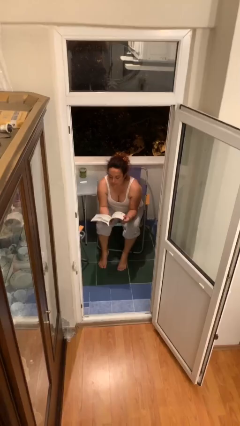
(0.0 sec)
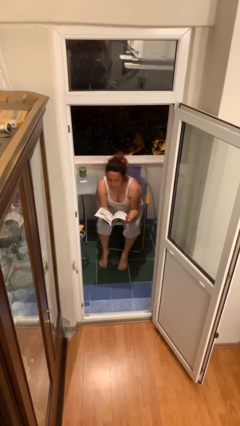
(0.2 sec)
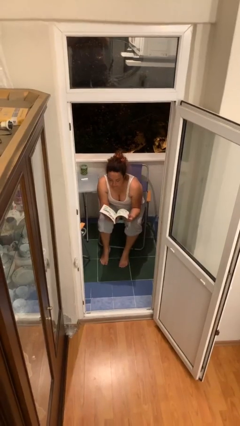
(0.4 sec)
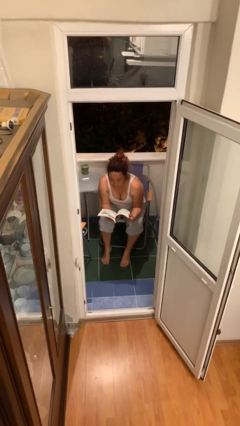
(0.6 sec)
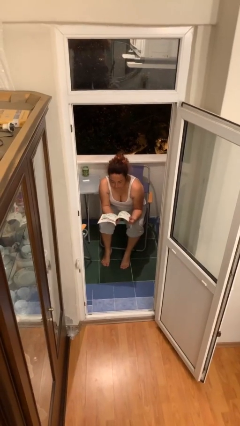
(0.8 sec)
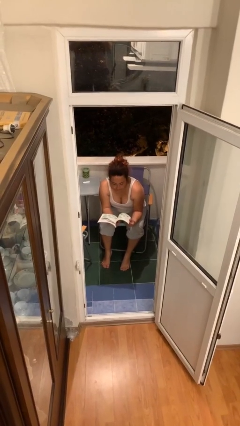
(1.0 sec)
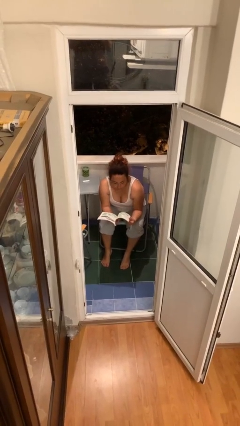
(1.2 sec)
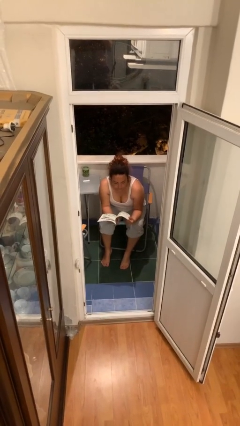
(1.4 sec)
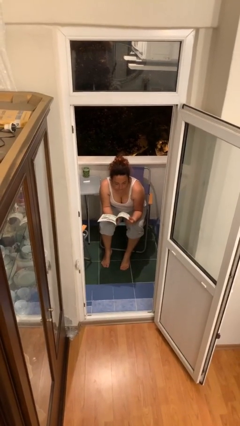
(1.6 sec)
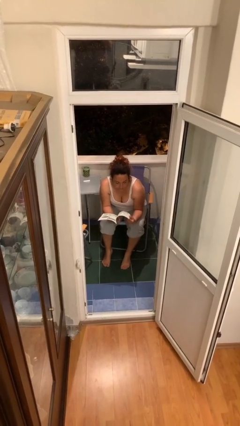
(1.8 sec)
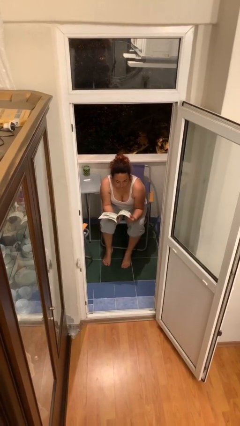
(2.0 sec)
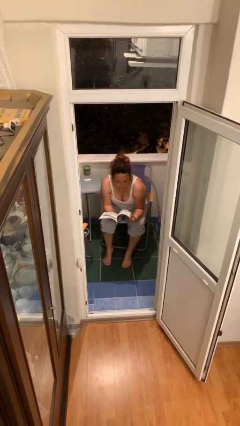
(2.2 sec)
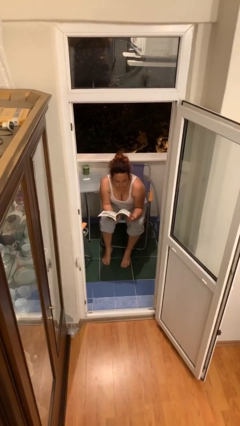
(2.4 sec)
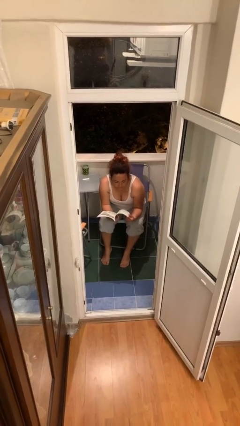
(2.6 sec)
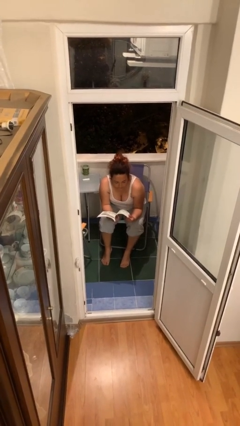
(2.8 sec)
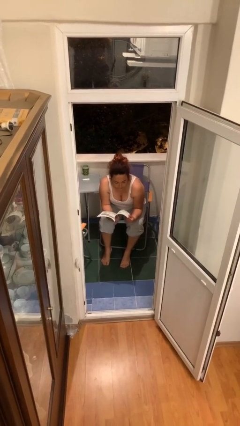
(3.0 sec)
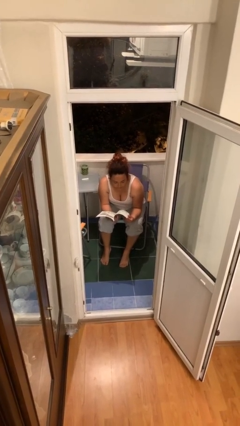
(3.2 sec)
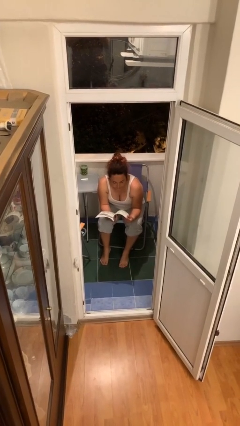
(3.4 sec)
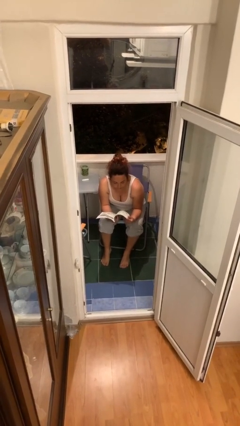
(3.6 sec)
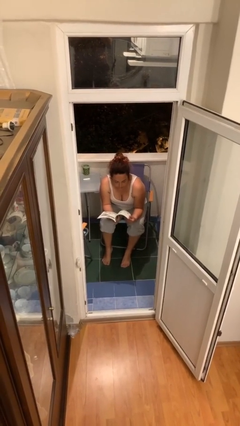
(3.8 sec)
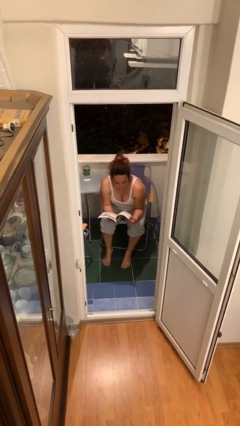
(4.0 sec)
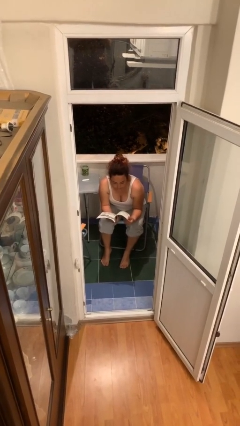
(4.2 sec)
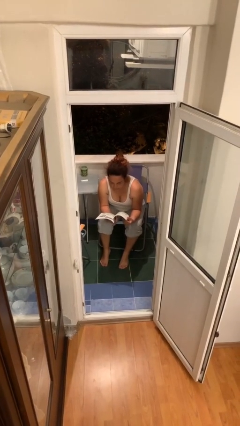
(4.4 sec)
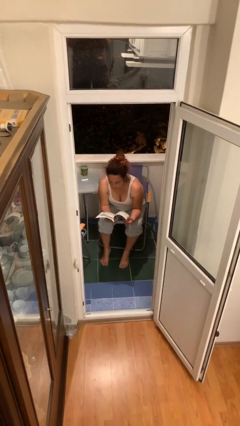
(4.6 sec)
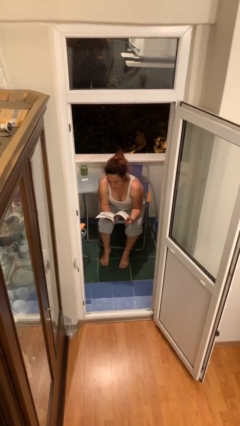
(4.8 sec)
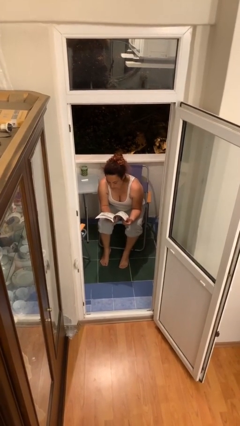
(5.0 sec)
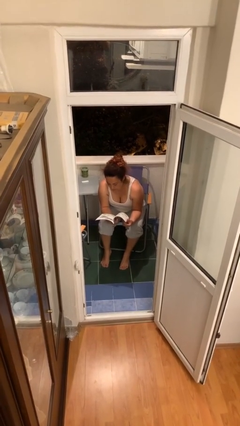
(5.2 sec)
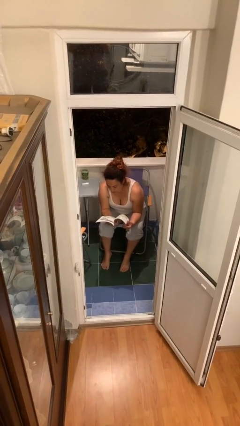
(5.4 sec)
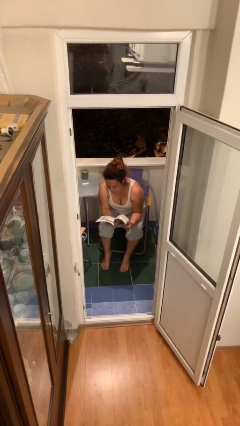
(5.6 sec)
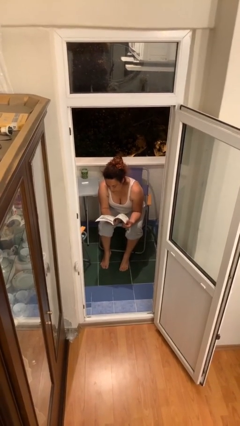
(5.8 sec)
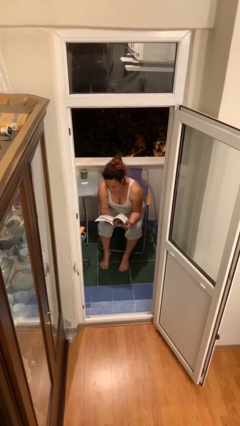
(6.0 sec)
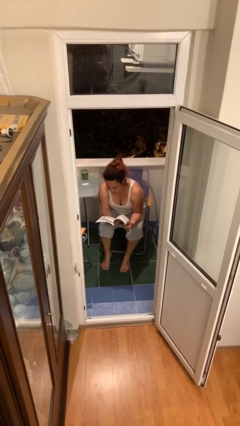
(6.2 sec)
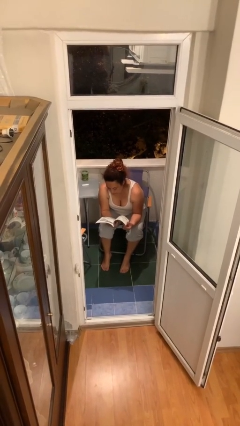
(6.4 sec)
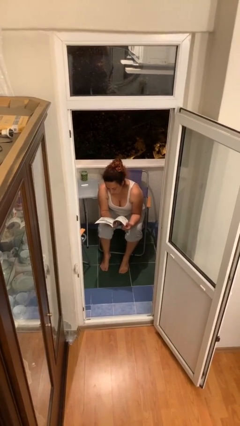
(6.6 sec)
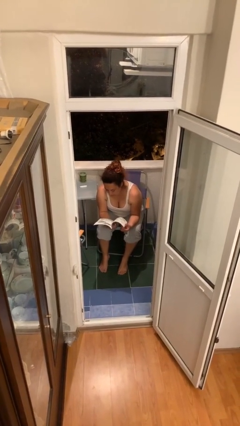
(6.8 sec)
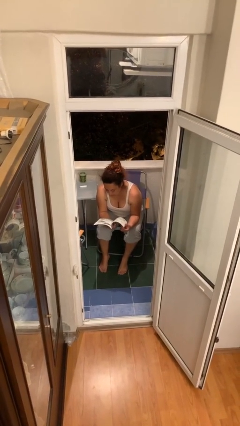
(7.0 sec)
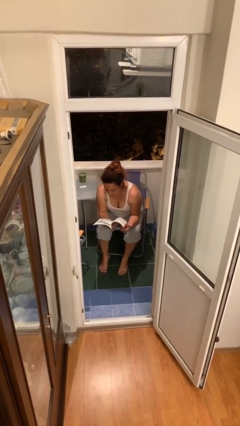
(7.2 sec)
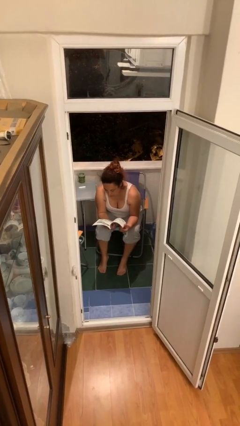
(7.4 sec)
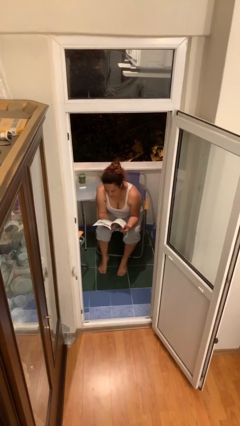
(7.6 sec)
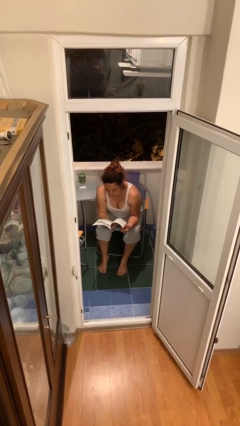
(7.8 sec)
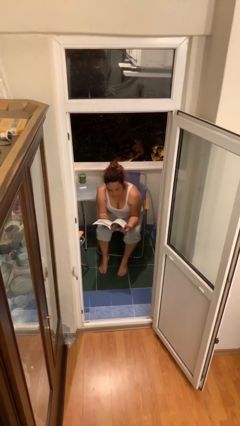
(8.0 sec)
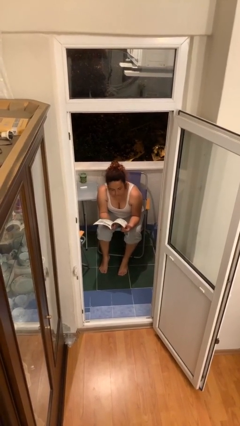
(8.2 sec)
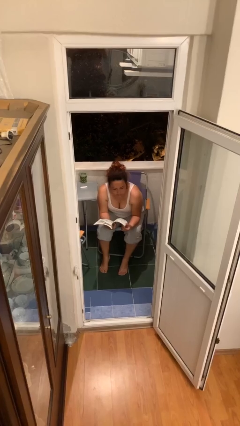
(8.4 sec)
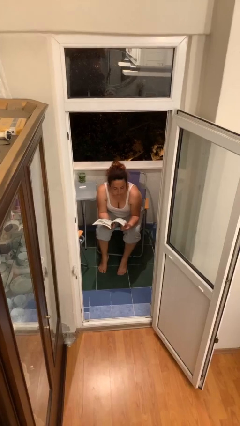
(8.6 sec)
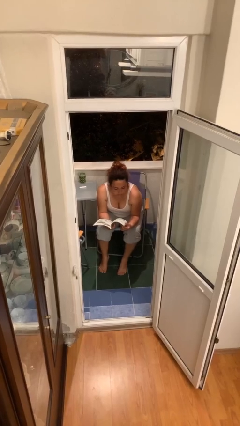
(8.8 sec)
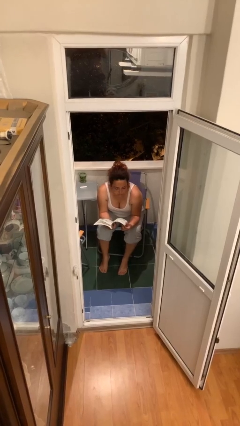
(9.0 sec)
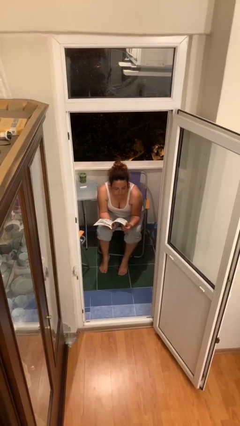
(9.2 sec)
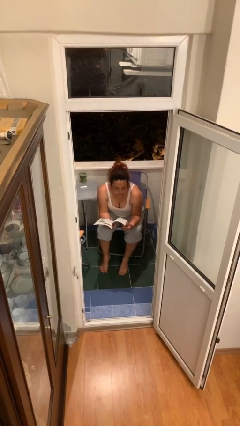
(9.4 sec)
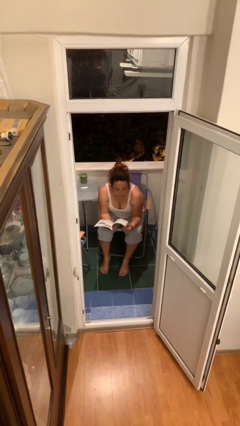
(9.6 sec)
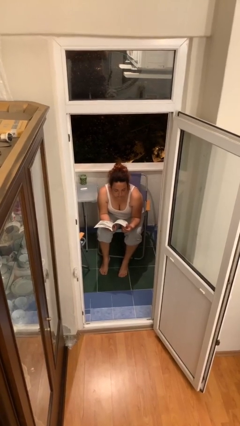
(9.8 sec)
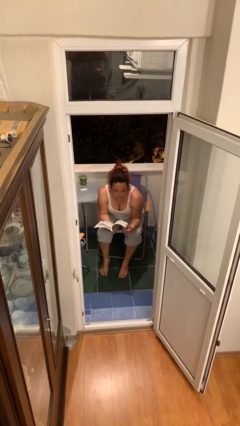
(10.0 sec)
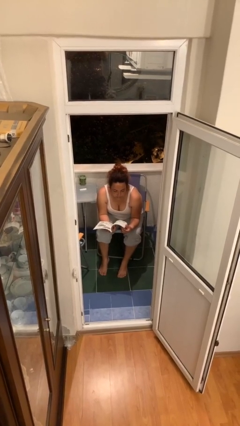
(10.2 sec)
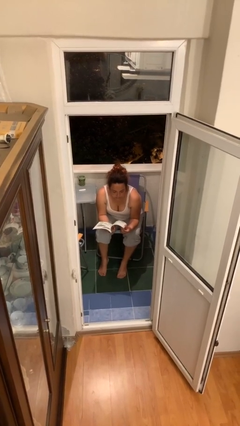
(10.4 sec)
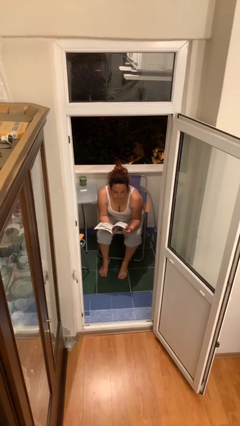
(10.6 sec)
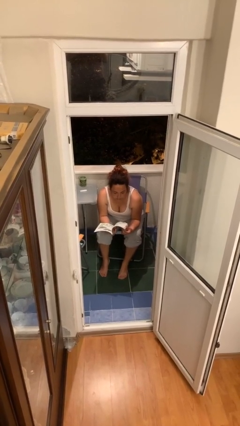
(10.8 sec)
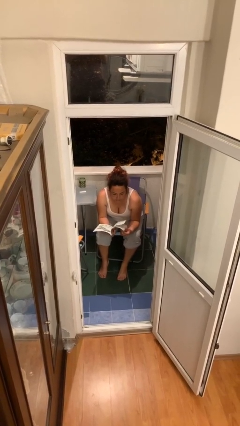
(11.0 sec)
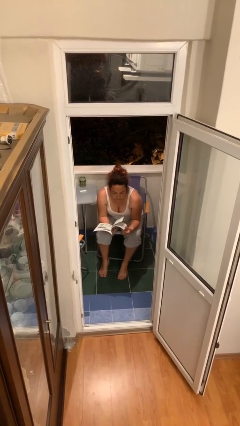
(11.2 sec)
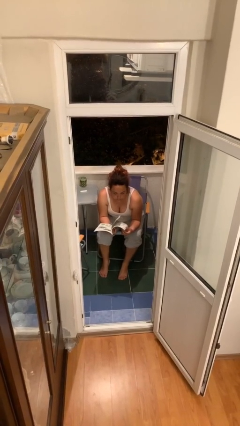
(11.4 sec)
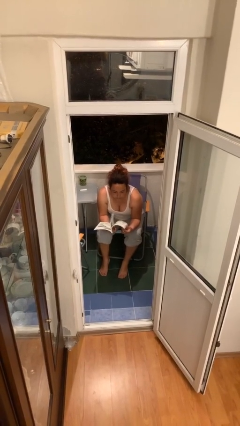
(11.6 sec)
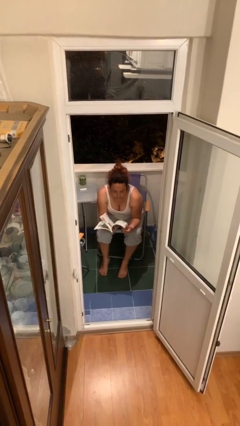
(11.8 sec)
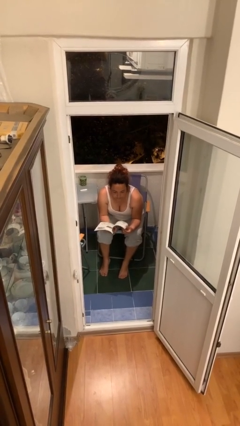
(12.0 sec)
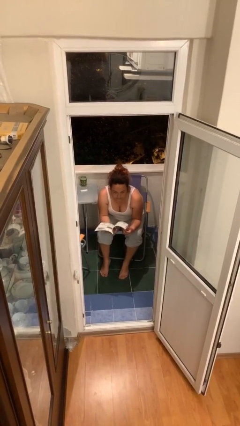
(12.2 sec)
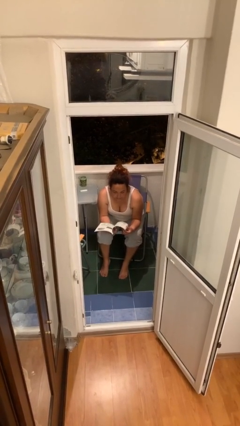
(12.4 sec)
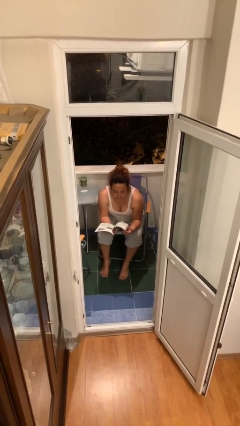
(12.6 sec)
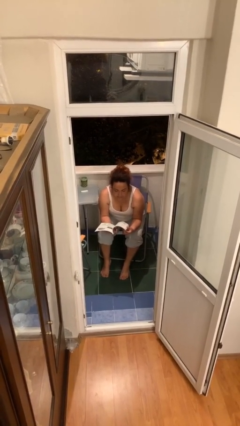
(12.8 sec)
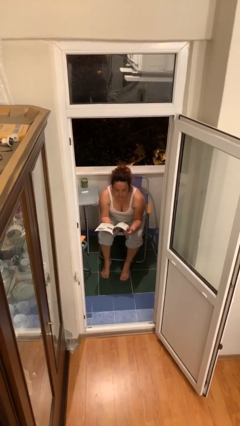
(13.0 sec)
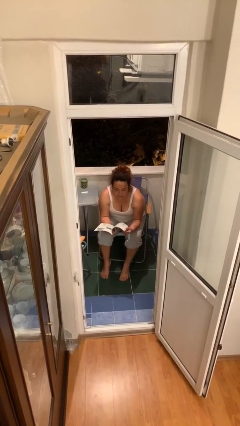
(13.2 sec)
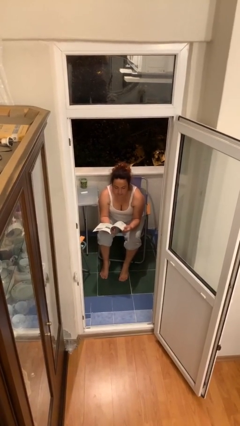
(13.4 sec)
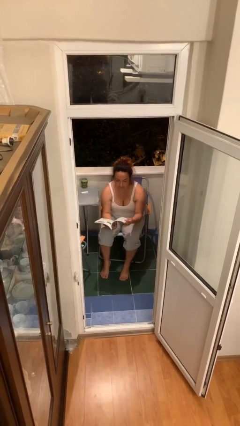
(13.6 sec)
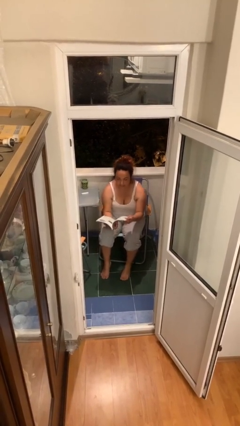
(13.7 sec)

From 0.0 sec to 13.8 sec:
person reads document

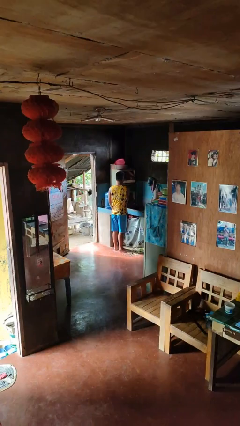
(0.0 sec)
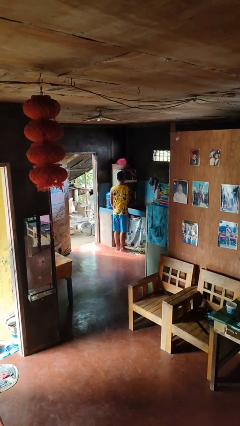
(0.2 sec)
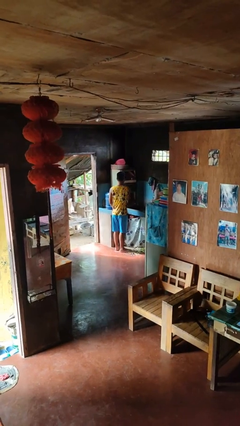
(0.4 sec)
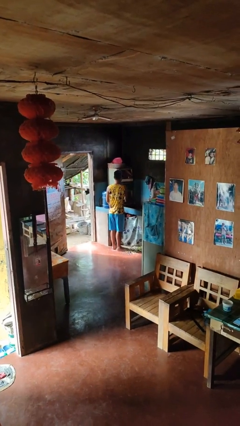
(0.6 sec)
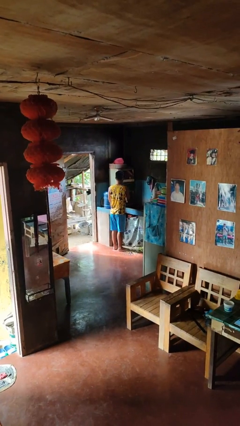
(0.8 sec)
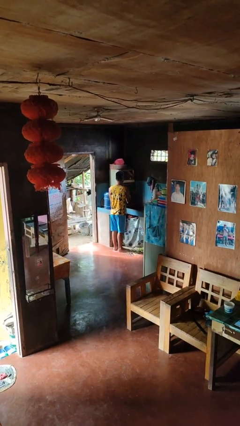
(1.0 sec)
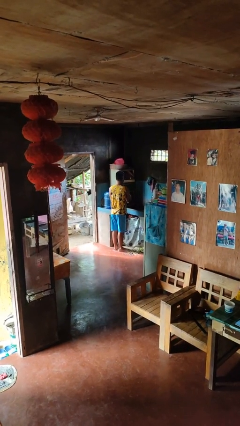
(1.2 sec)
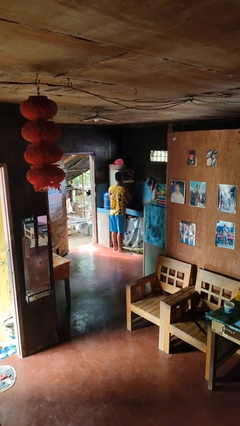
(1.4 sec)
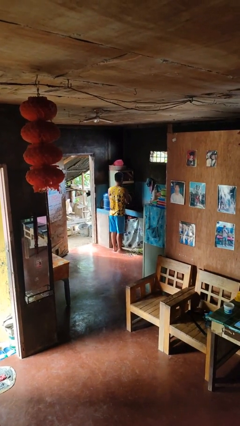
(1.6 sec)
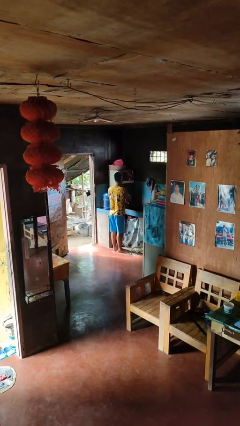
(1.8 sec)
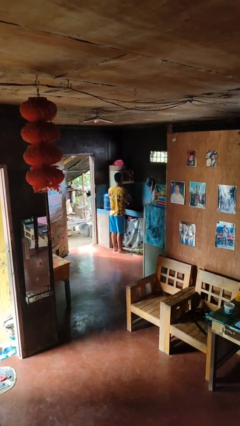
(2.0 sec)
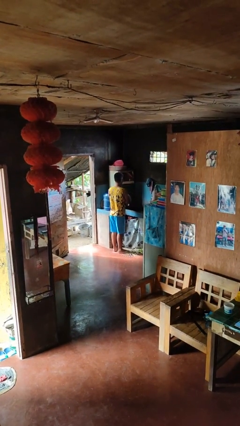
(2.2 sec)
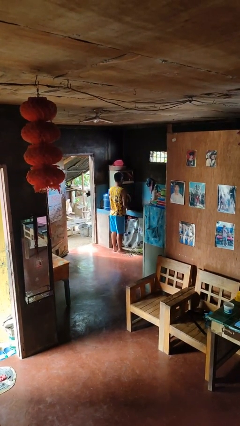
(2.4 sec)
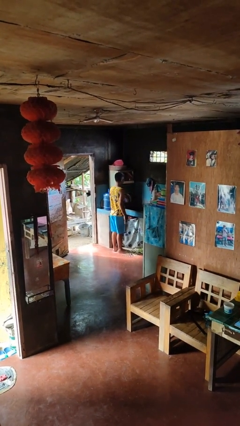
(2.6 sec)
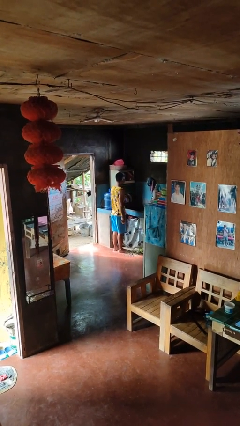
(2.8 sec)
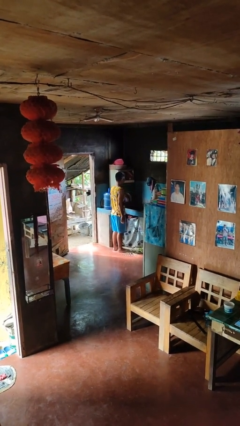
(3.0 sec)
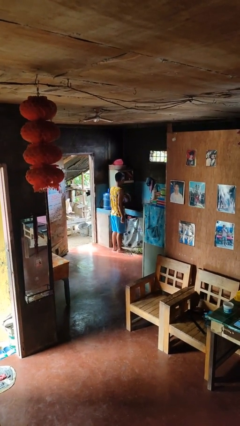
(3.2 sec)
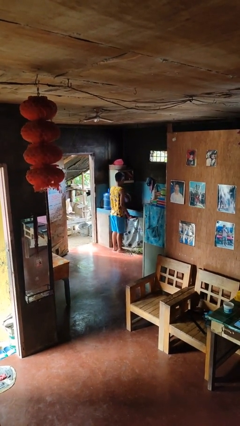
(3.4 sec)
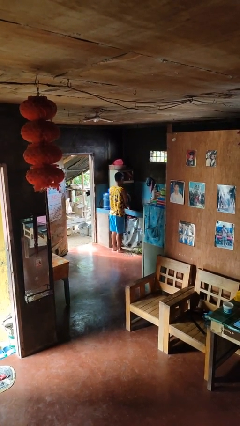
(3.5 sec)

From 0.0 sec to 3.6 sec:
person opens dishwasher

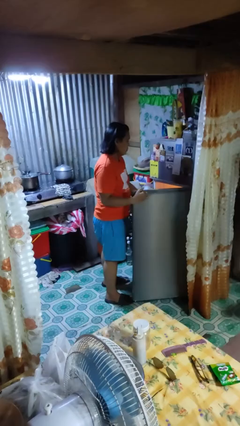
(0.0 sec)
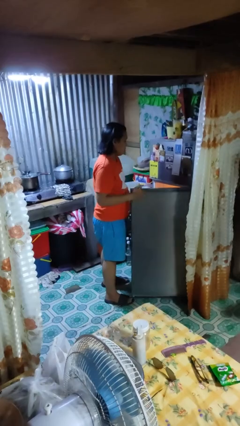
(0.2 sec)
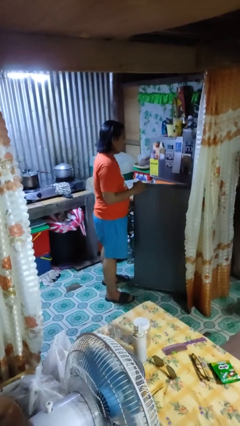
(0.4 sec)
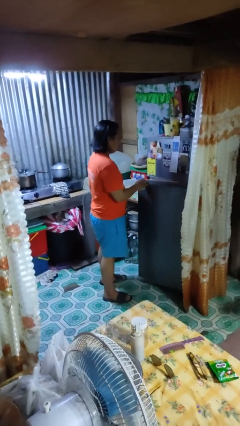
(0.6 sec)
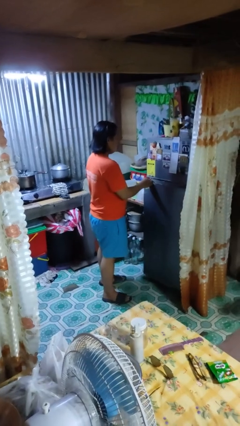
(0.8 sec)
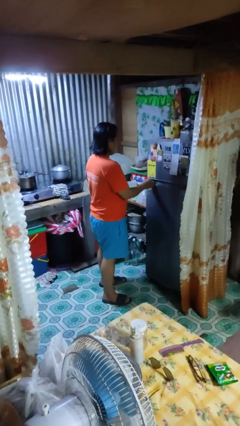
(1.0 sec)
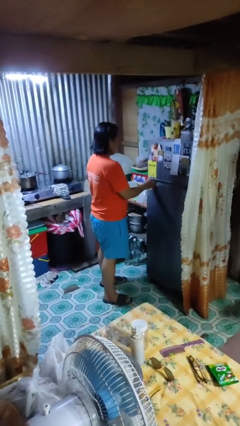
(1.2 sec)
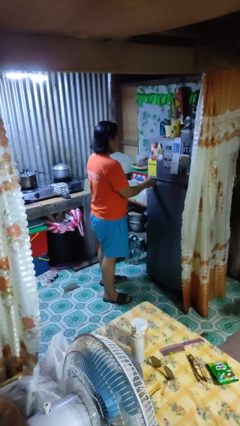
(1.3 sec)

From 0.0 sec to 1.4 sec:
person closes refrigerator
